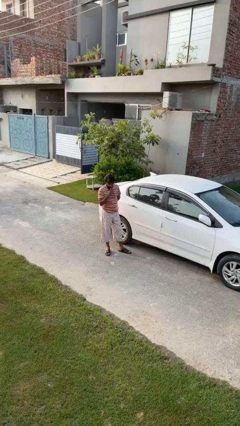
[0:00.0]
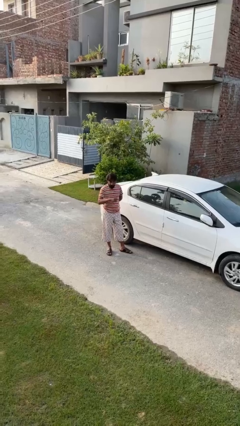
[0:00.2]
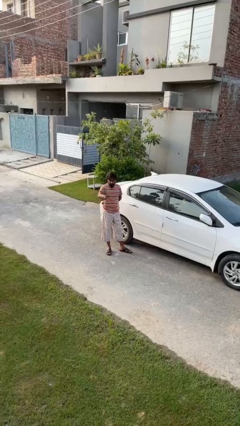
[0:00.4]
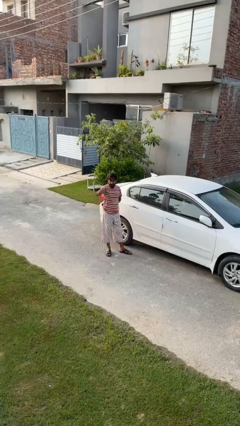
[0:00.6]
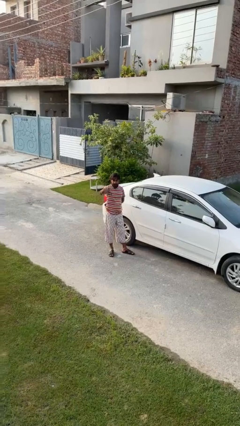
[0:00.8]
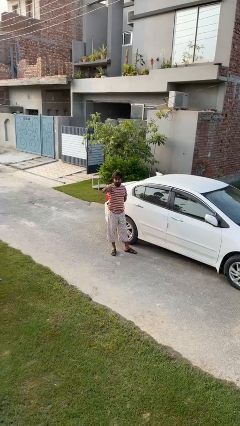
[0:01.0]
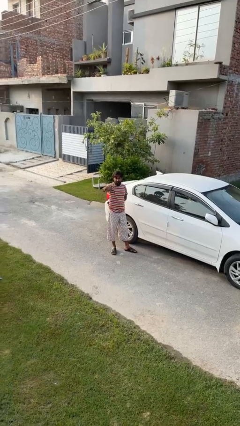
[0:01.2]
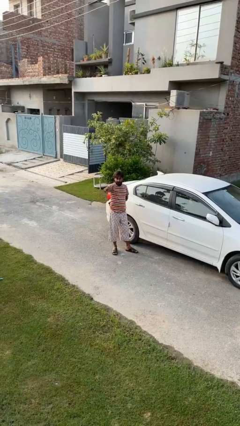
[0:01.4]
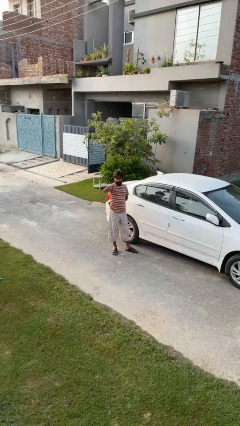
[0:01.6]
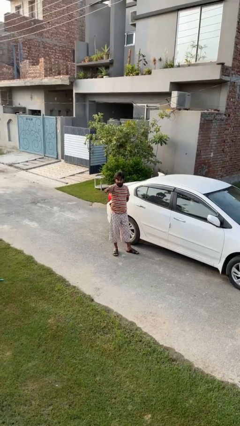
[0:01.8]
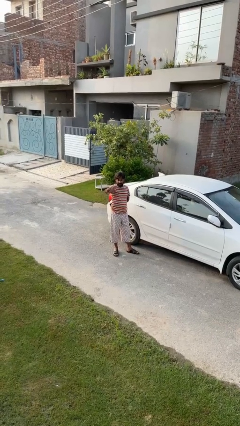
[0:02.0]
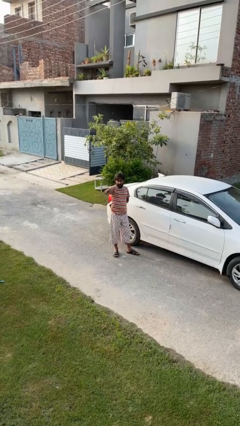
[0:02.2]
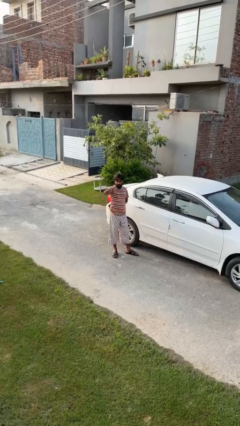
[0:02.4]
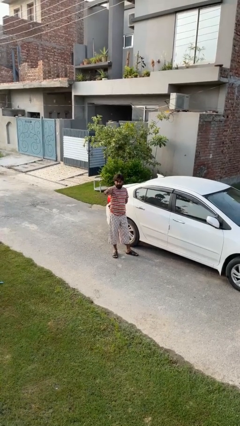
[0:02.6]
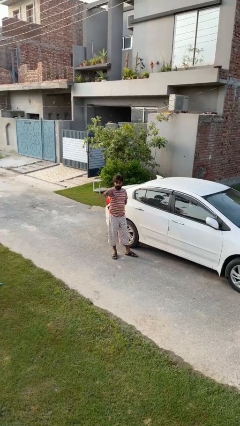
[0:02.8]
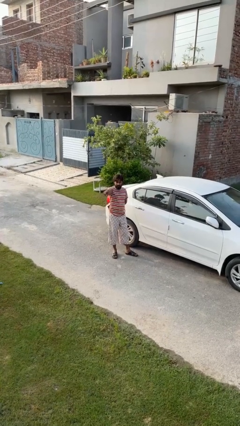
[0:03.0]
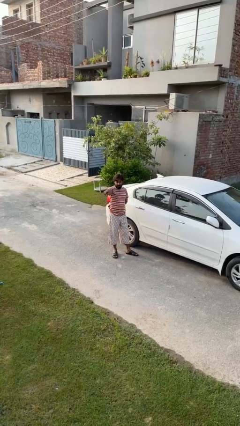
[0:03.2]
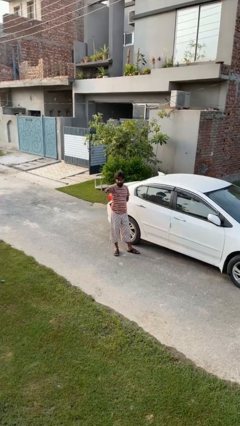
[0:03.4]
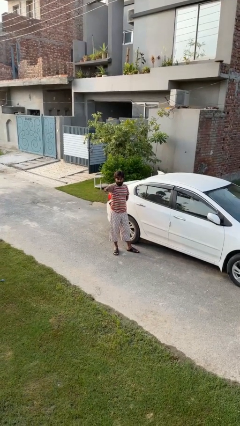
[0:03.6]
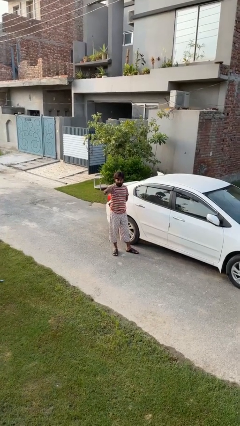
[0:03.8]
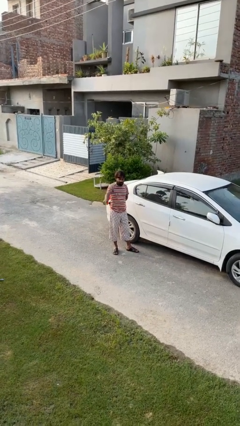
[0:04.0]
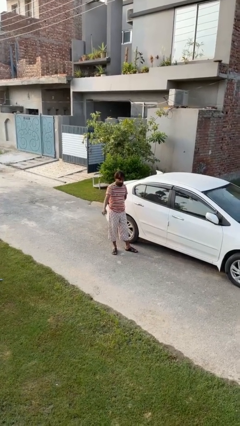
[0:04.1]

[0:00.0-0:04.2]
person points at person

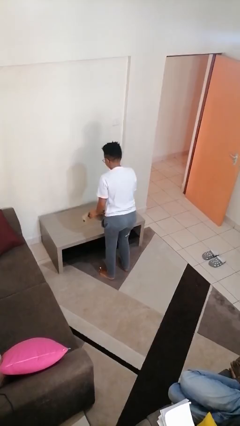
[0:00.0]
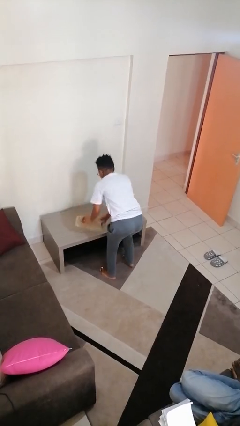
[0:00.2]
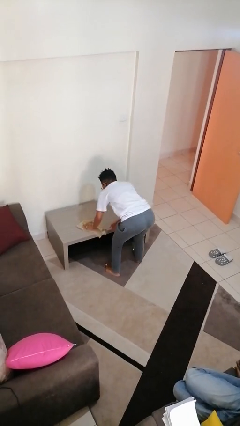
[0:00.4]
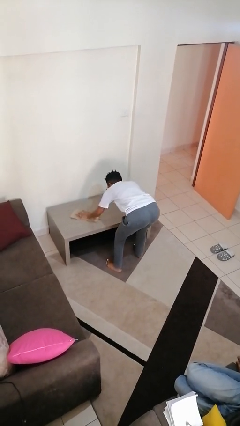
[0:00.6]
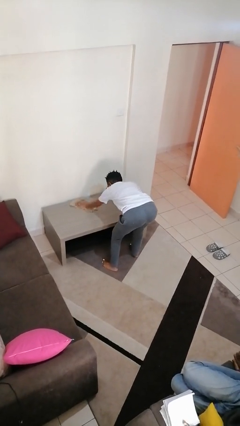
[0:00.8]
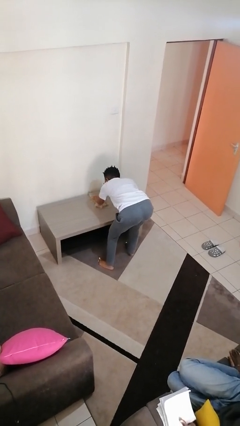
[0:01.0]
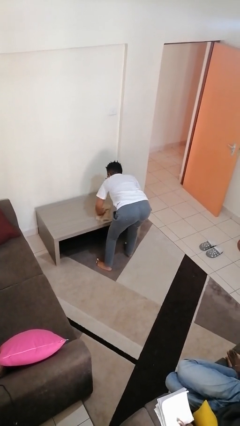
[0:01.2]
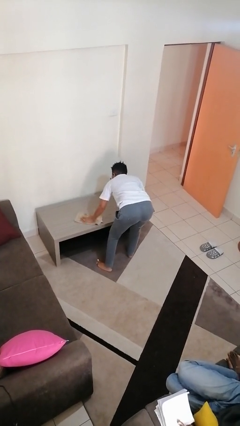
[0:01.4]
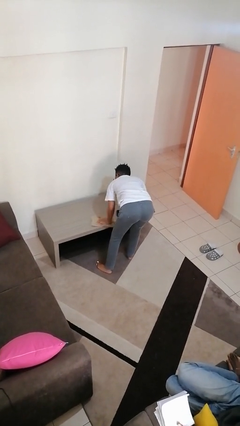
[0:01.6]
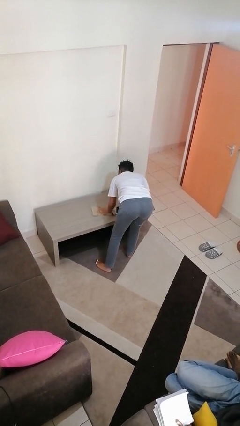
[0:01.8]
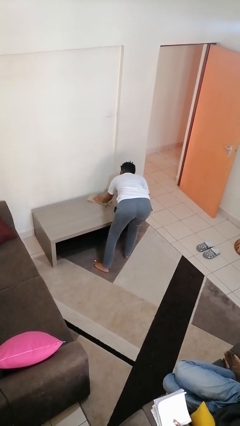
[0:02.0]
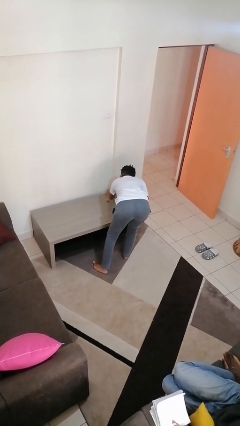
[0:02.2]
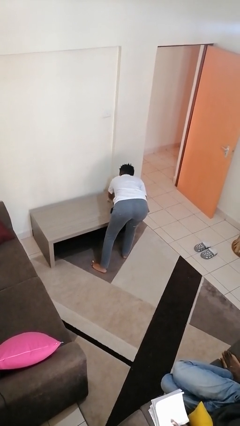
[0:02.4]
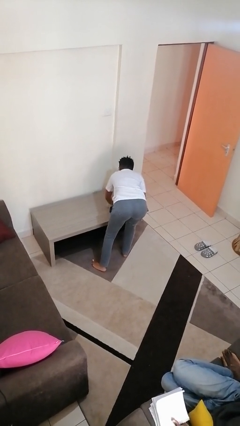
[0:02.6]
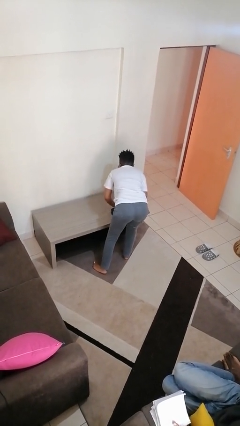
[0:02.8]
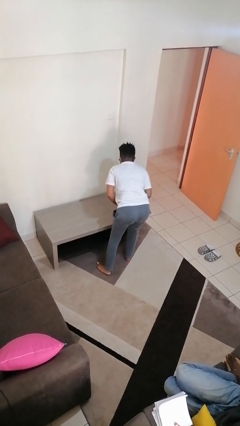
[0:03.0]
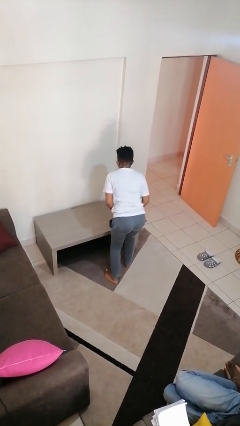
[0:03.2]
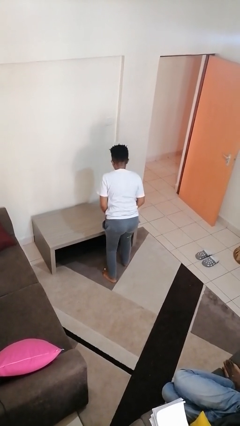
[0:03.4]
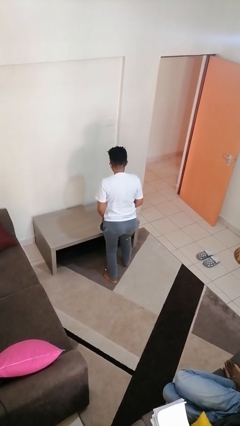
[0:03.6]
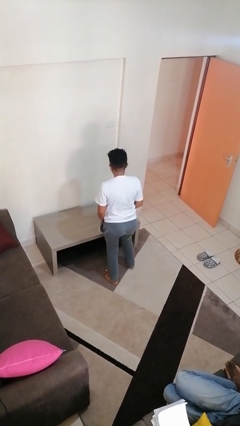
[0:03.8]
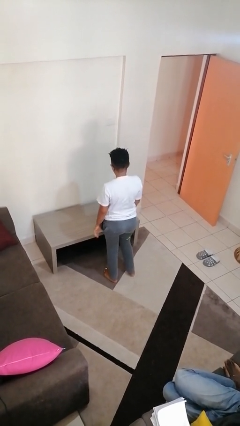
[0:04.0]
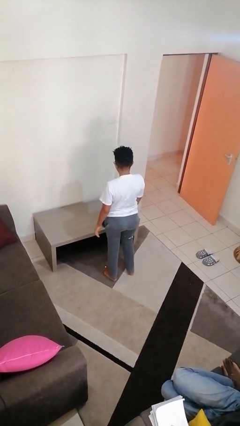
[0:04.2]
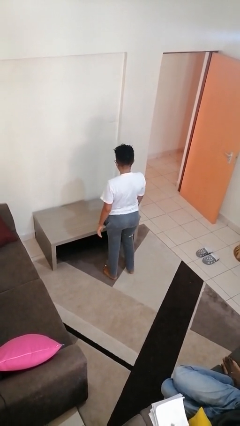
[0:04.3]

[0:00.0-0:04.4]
person cleans table with rag

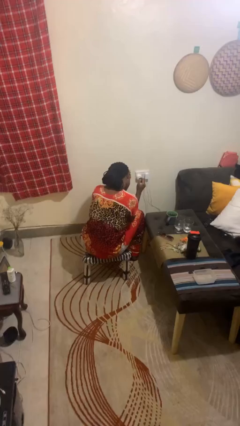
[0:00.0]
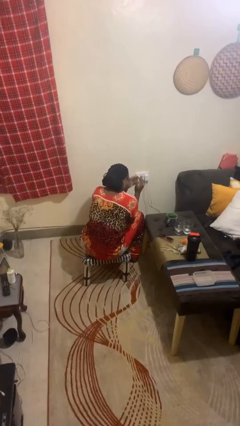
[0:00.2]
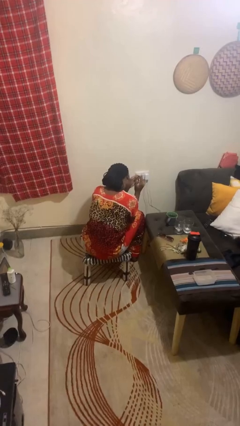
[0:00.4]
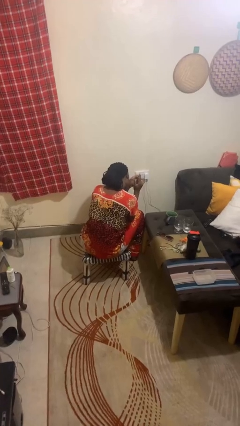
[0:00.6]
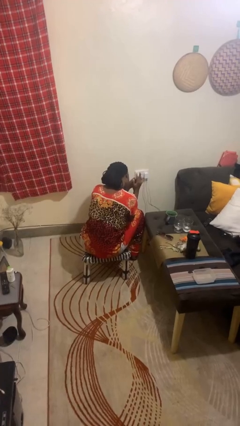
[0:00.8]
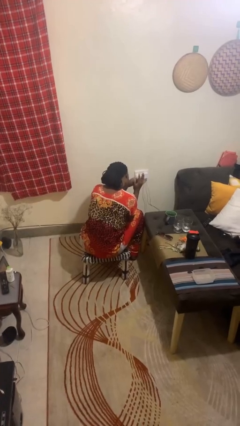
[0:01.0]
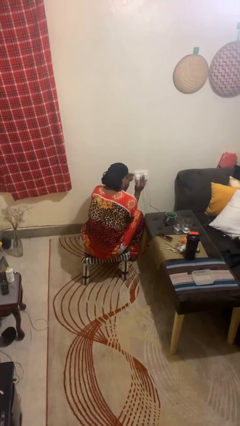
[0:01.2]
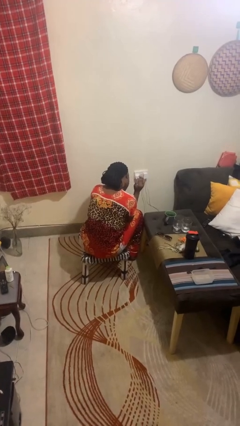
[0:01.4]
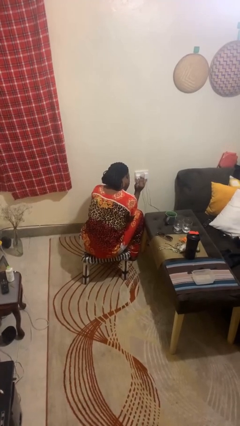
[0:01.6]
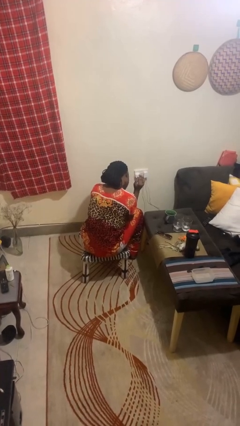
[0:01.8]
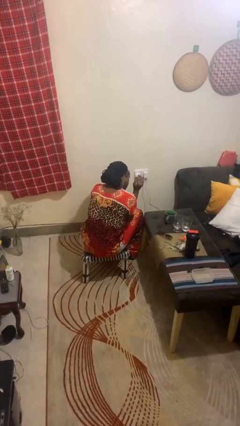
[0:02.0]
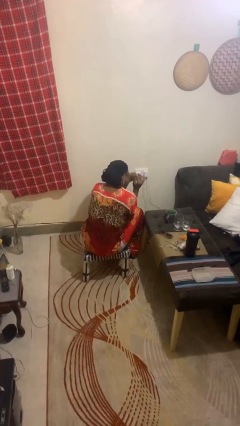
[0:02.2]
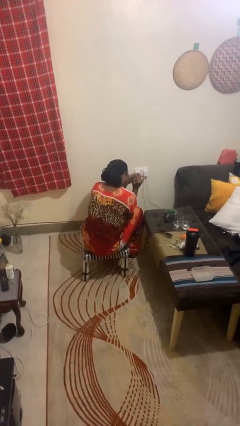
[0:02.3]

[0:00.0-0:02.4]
person puts on ring

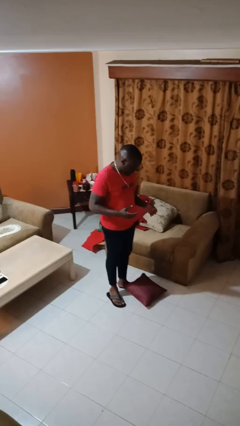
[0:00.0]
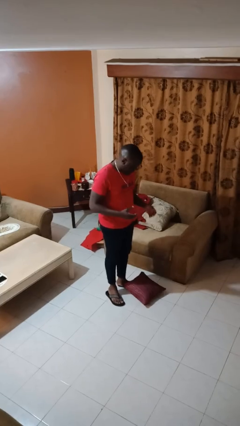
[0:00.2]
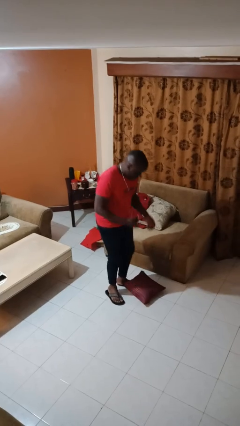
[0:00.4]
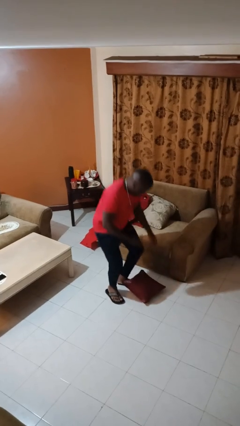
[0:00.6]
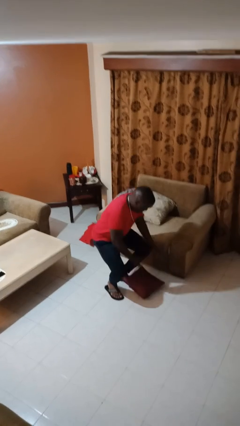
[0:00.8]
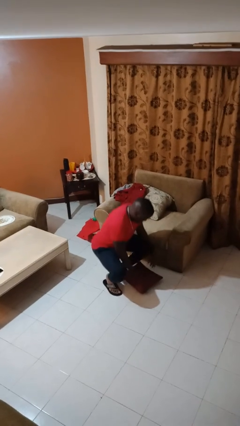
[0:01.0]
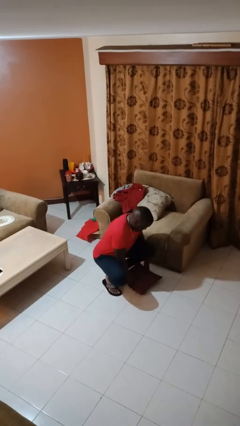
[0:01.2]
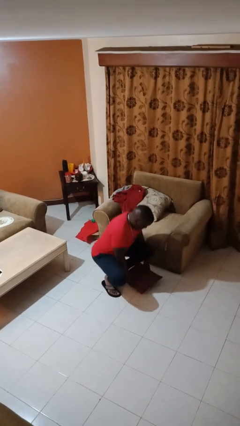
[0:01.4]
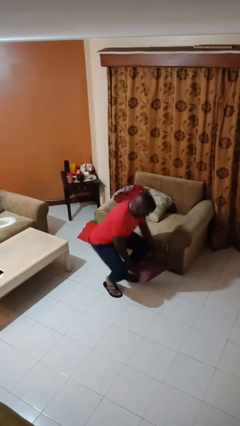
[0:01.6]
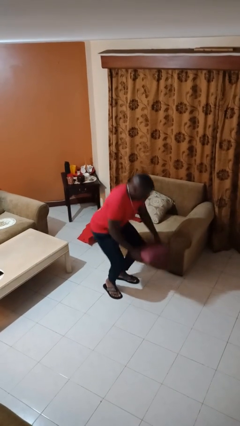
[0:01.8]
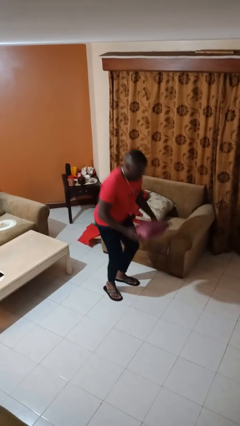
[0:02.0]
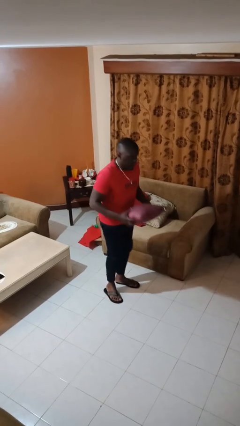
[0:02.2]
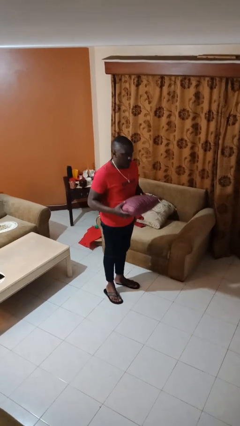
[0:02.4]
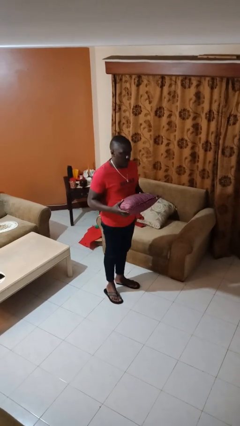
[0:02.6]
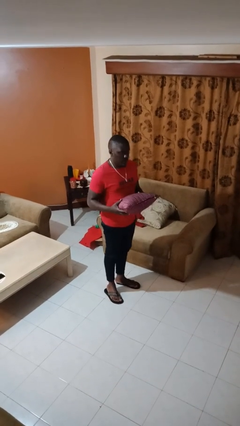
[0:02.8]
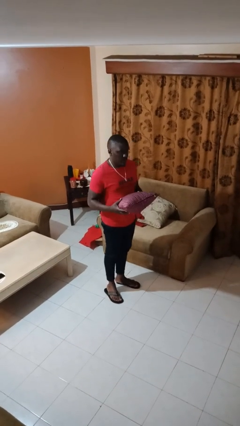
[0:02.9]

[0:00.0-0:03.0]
person picks up object from floor

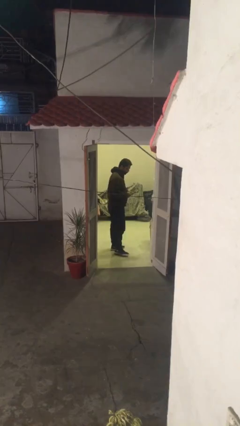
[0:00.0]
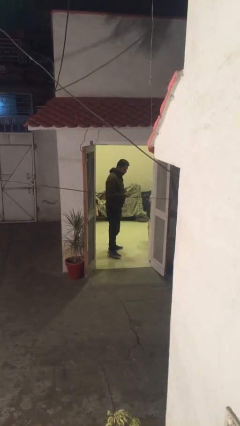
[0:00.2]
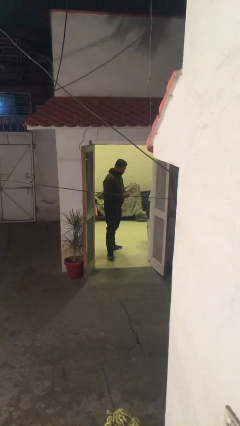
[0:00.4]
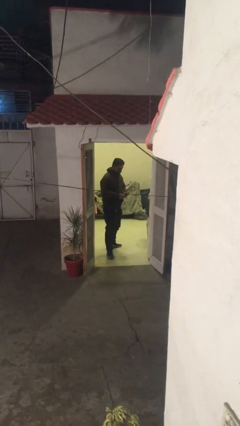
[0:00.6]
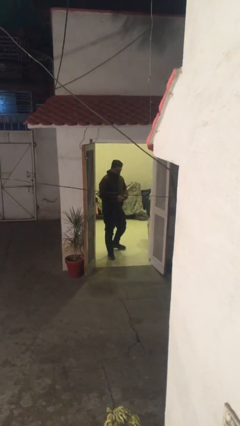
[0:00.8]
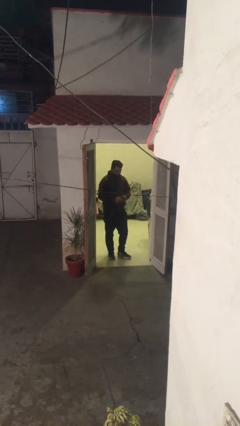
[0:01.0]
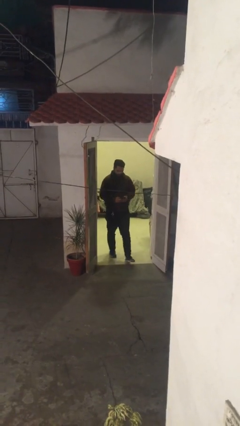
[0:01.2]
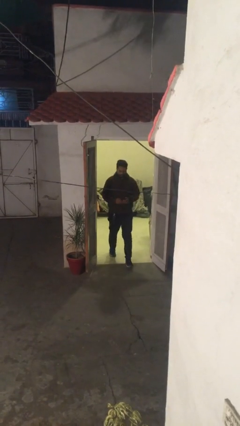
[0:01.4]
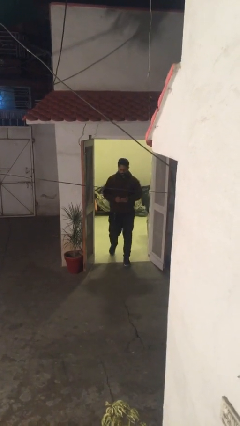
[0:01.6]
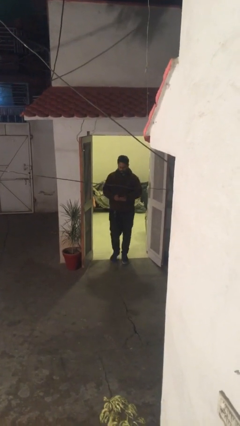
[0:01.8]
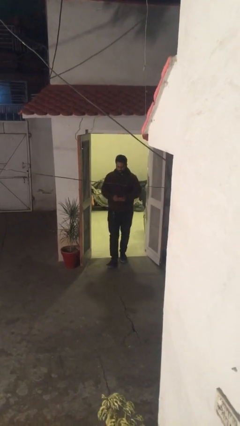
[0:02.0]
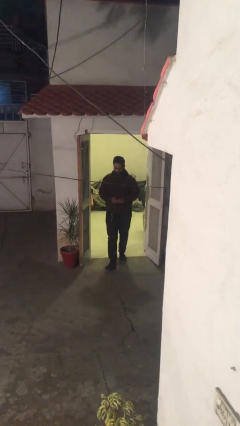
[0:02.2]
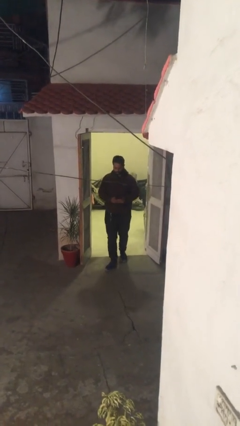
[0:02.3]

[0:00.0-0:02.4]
person enters scene through structure

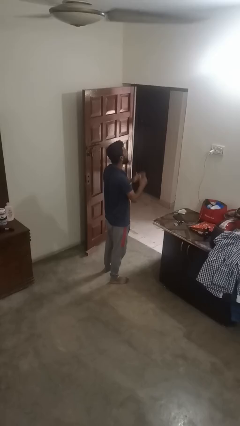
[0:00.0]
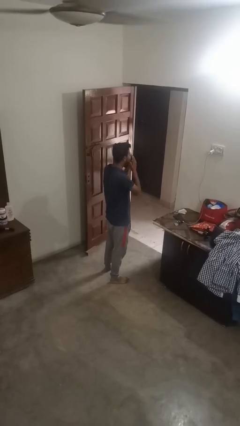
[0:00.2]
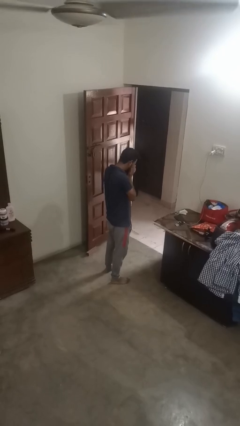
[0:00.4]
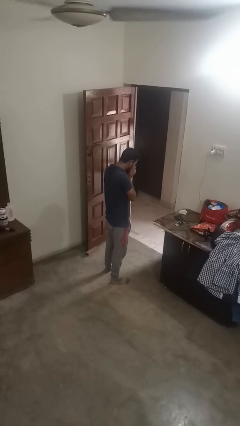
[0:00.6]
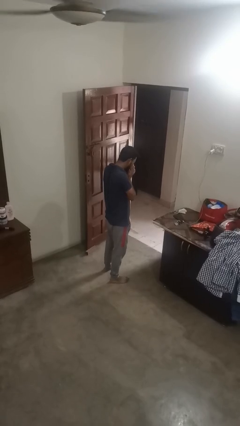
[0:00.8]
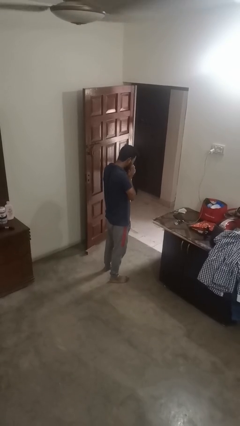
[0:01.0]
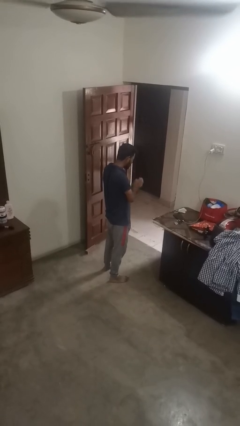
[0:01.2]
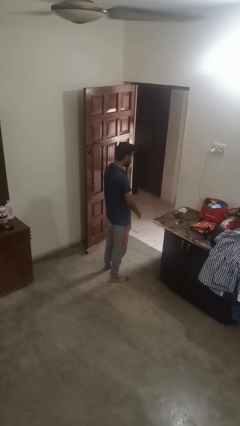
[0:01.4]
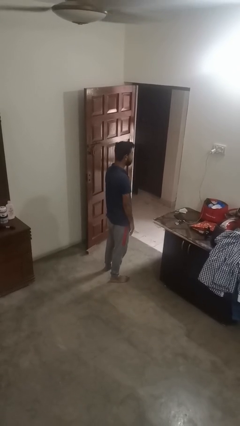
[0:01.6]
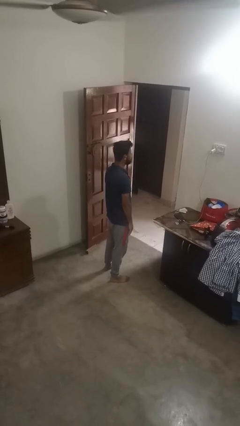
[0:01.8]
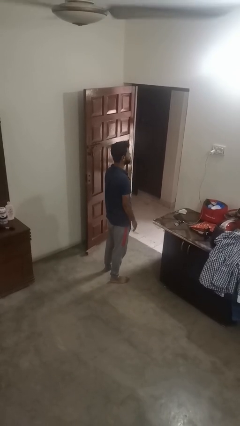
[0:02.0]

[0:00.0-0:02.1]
person sneezes into hand
